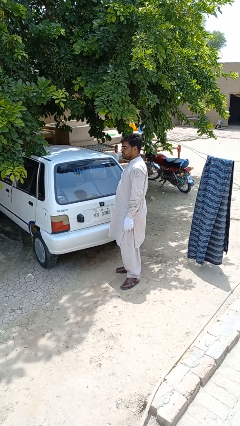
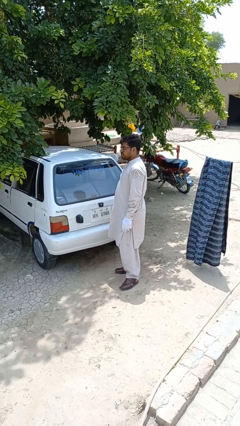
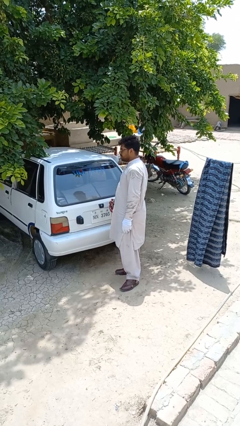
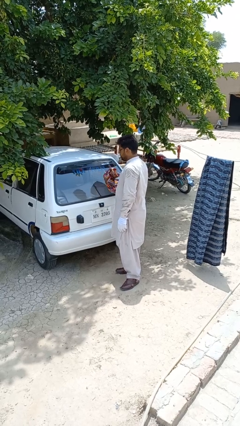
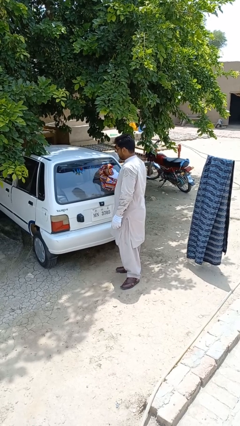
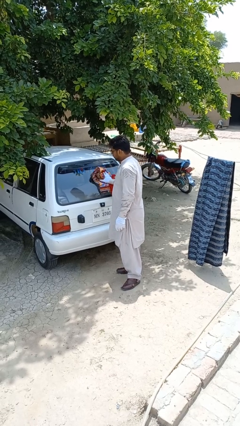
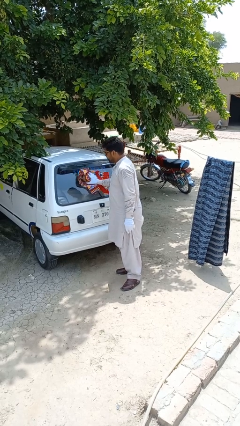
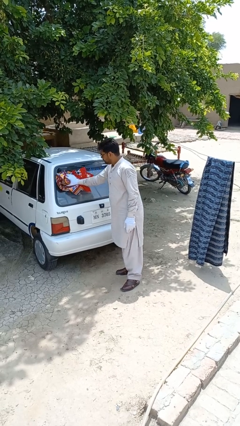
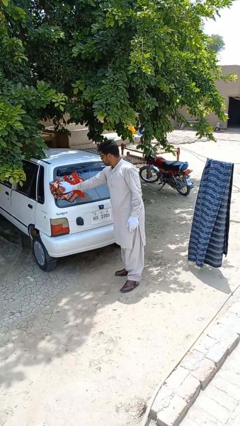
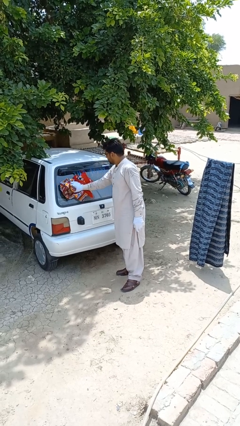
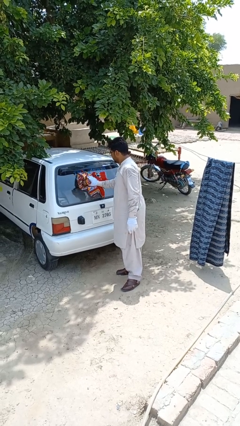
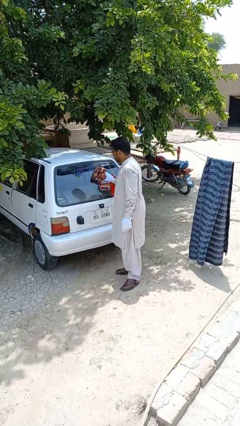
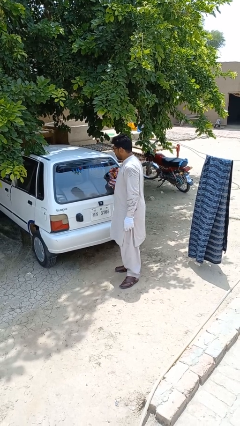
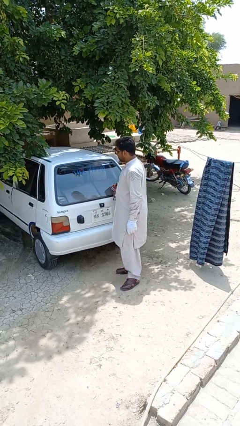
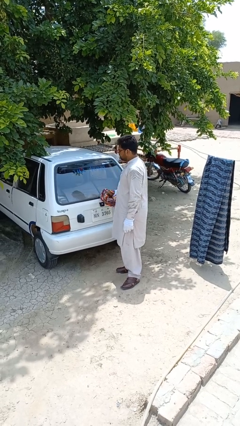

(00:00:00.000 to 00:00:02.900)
person polishes car with rag

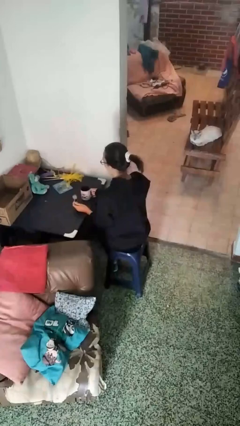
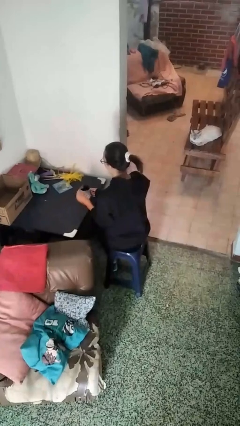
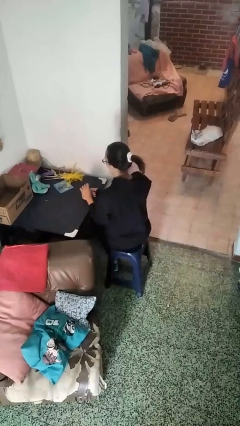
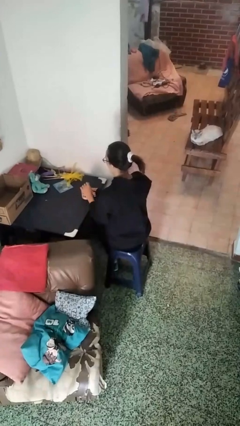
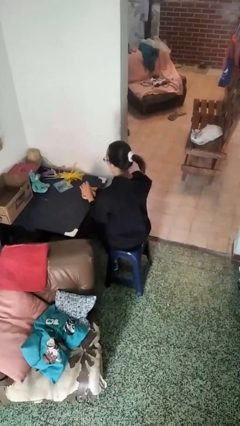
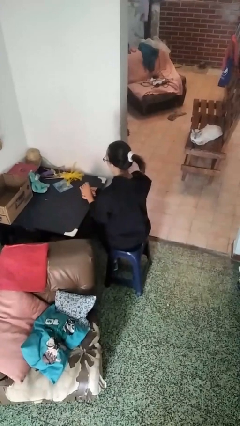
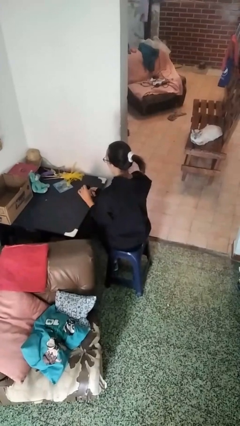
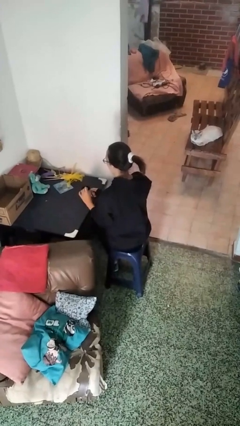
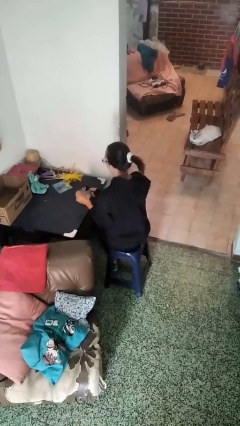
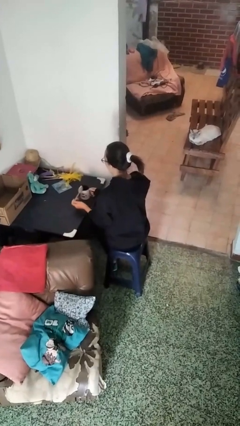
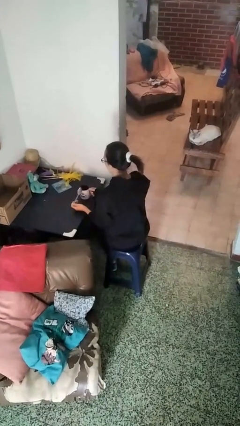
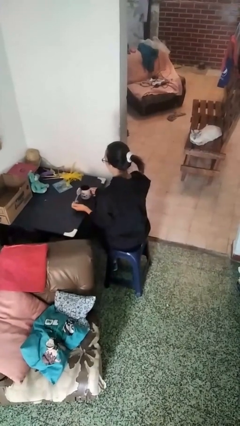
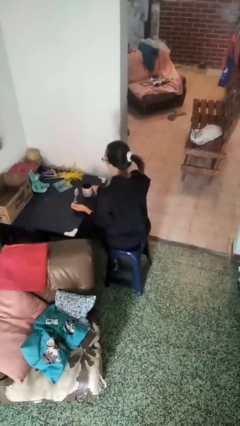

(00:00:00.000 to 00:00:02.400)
person stirs mug

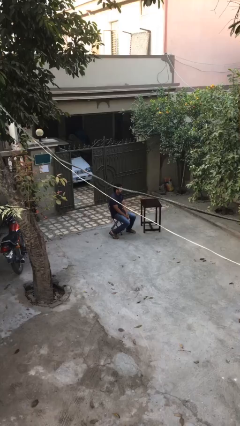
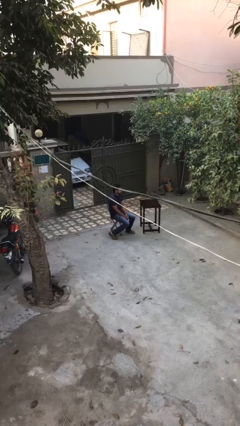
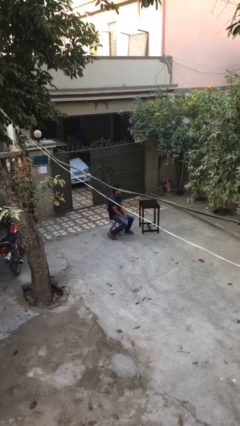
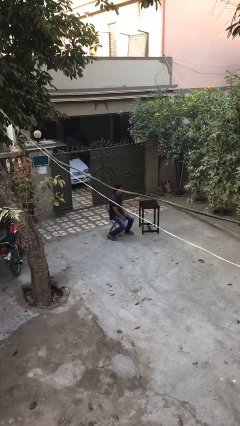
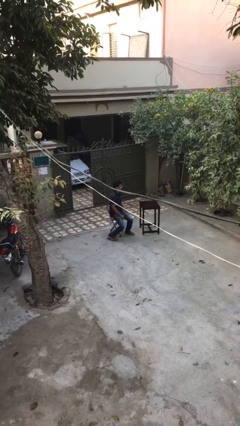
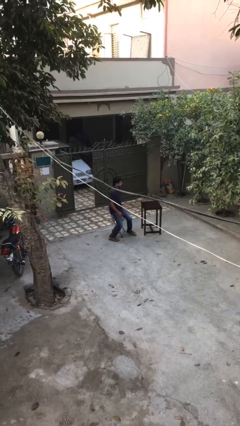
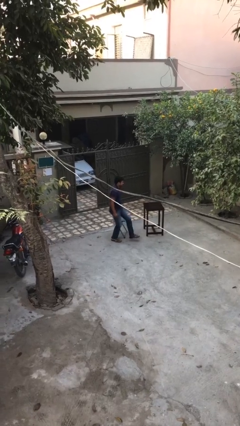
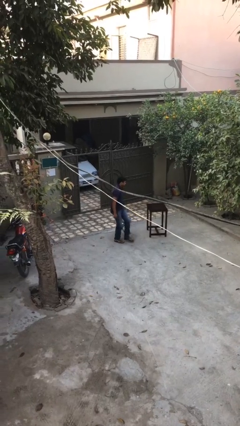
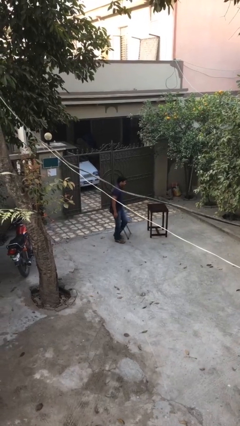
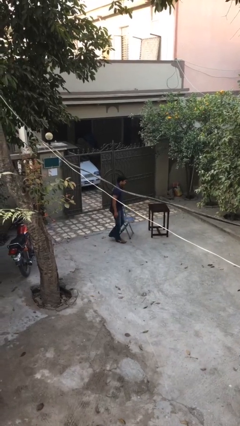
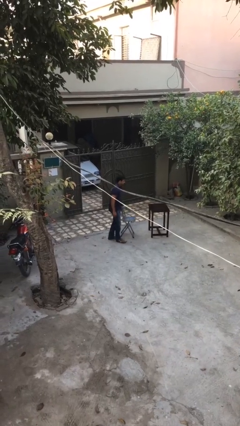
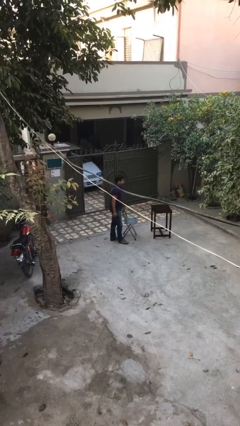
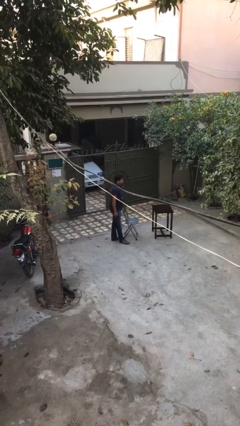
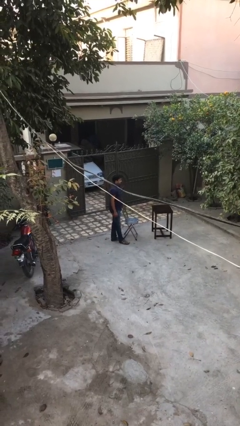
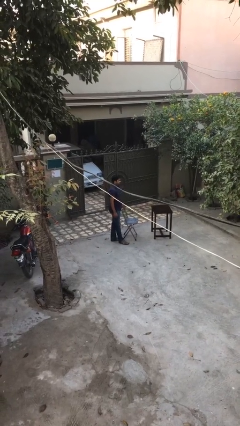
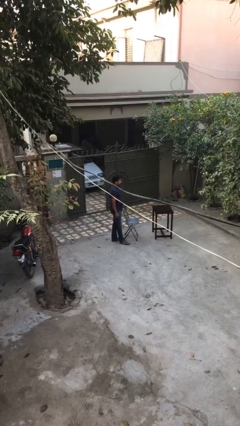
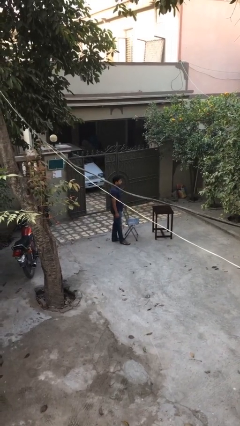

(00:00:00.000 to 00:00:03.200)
person stands up

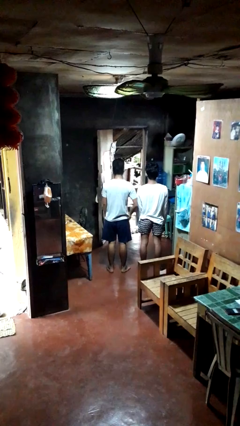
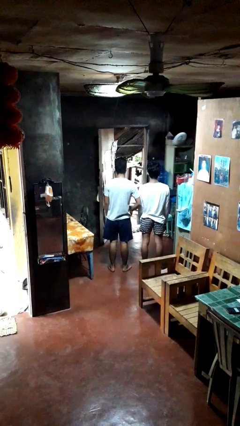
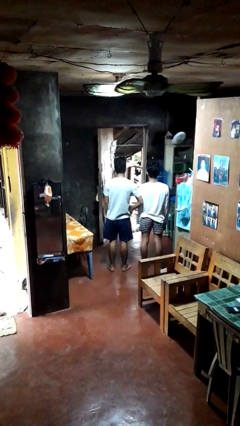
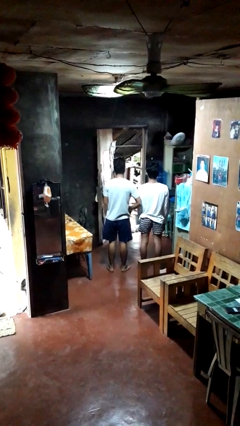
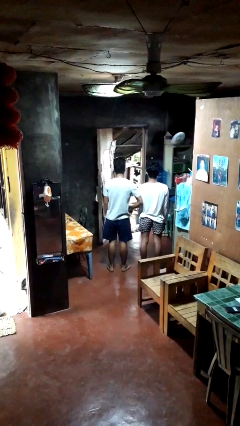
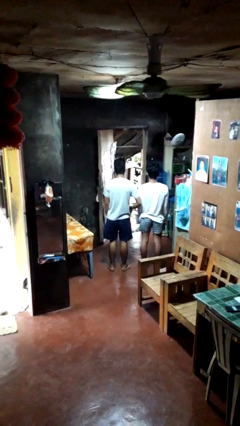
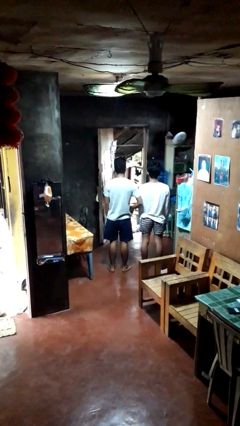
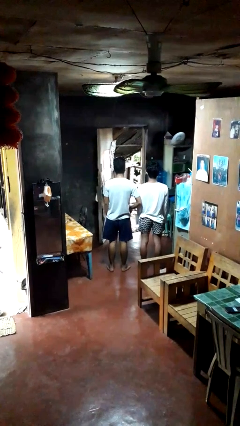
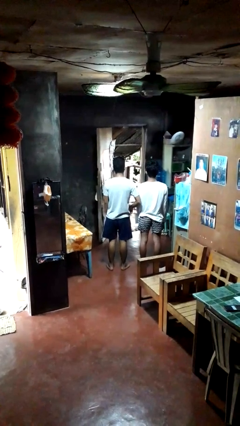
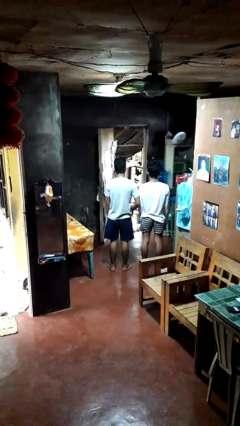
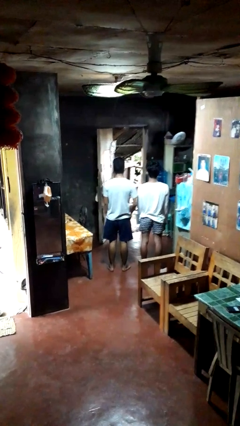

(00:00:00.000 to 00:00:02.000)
person nudges person with elbow

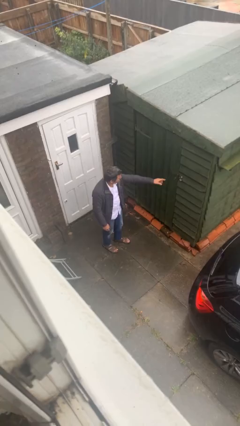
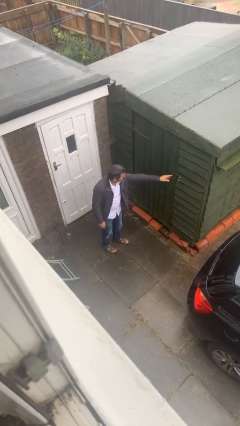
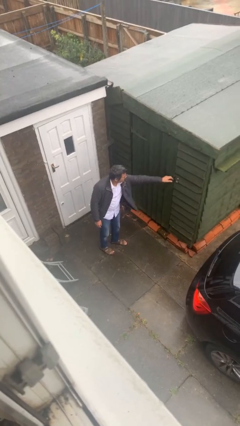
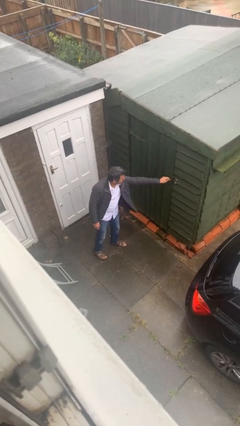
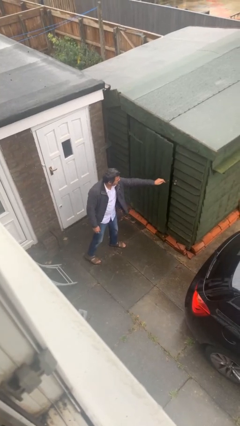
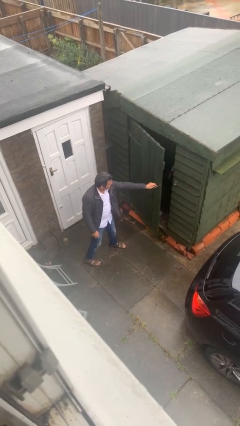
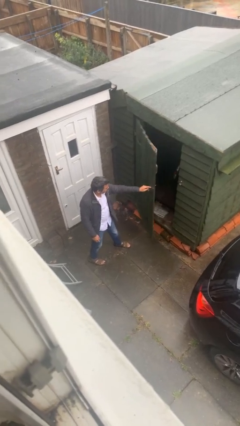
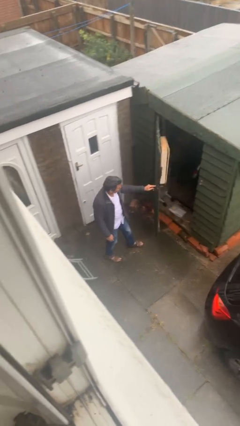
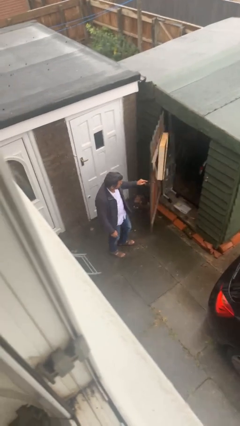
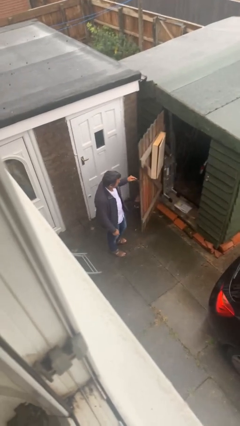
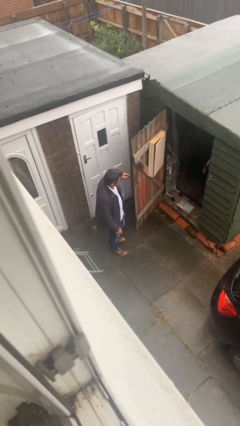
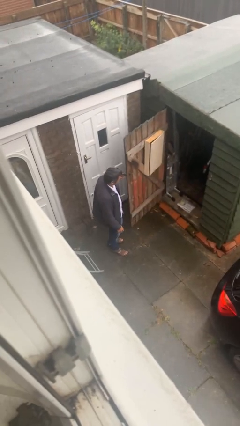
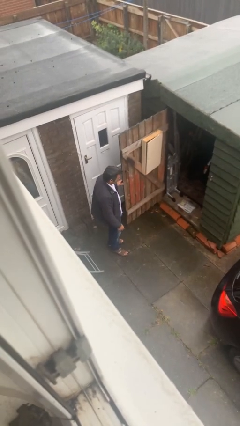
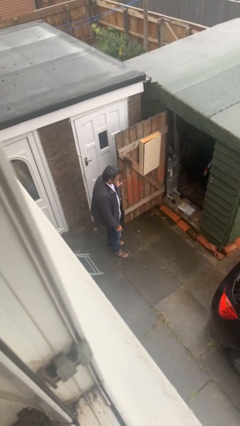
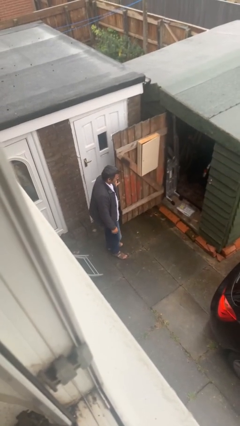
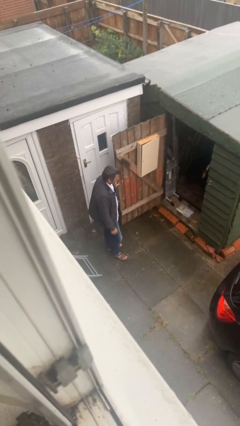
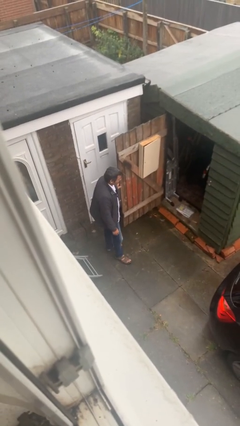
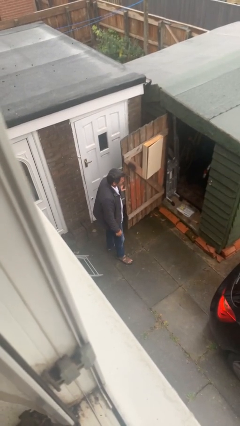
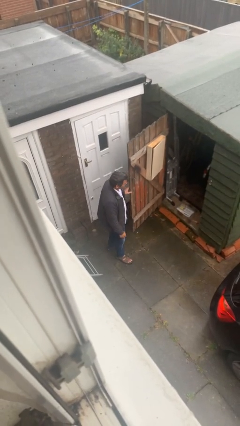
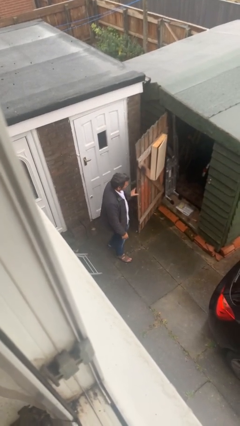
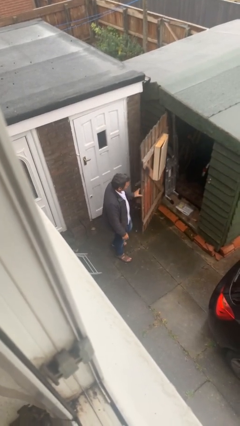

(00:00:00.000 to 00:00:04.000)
person opens facility door

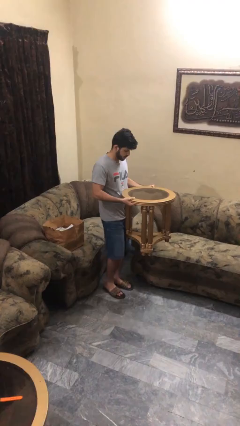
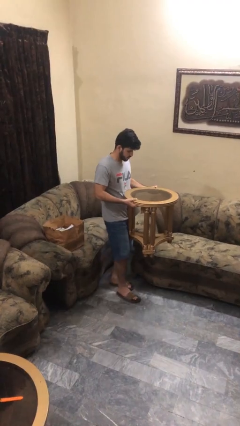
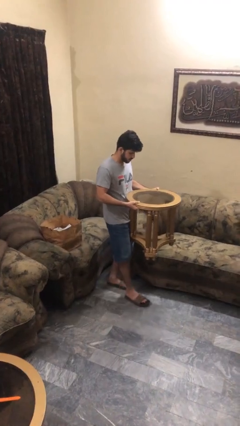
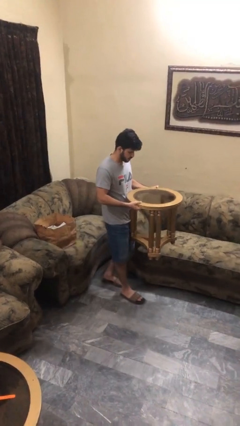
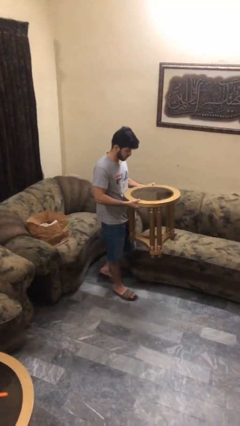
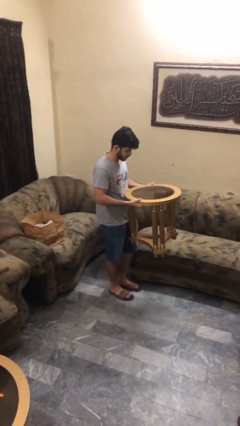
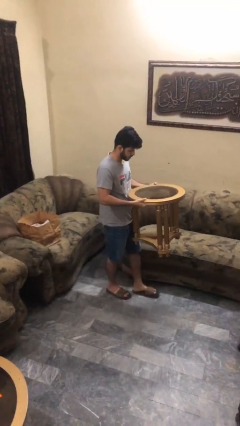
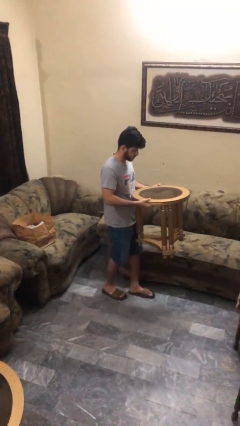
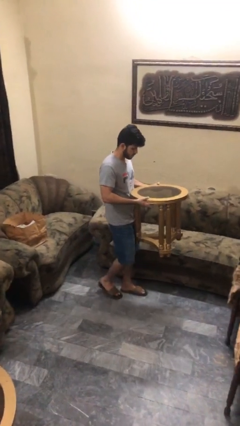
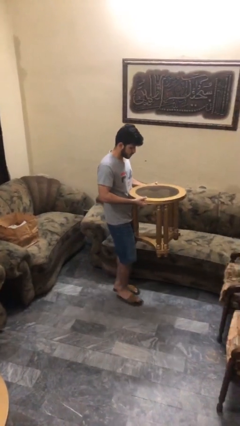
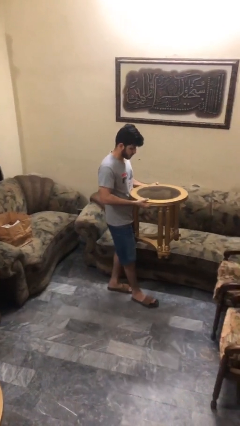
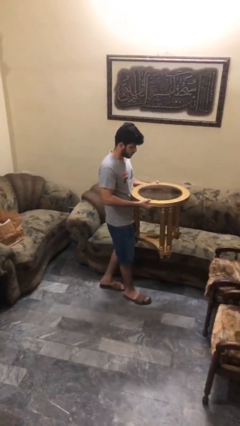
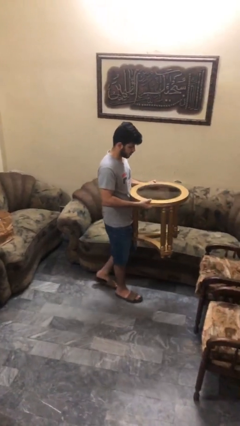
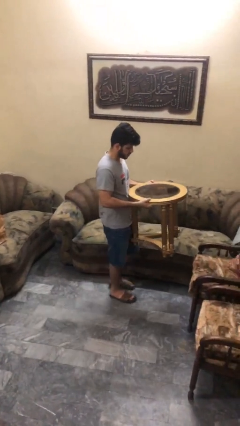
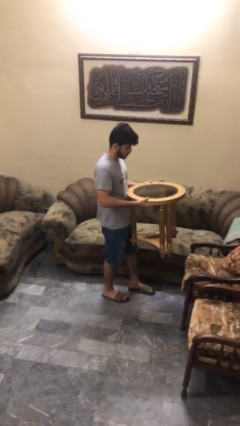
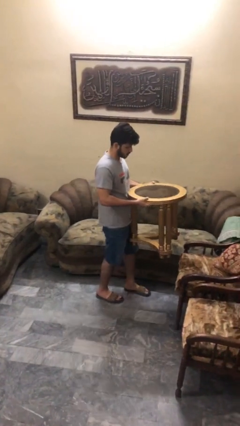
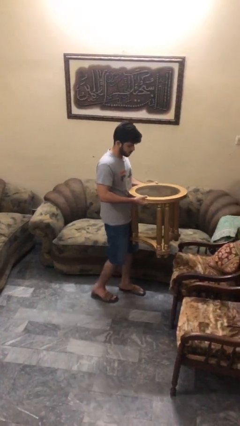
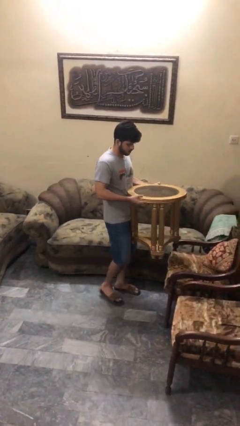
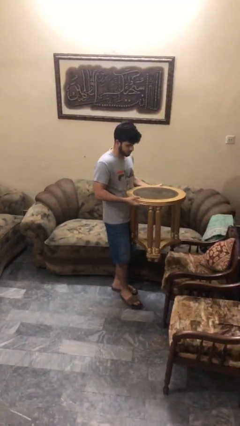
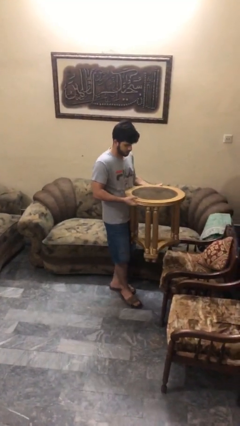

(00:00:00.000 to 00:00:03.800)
person carries furniture
